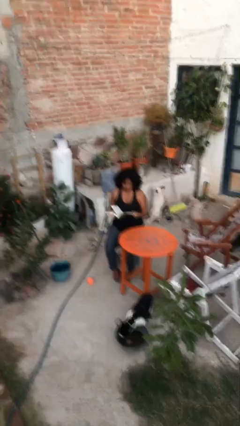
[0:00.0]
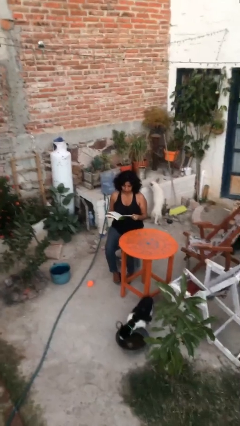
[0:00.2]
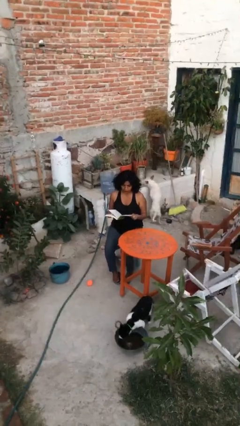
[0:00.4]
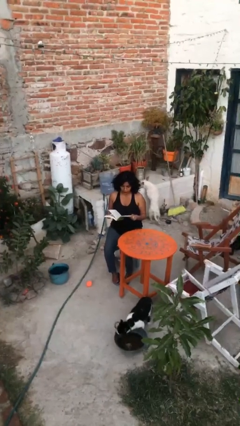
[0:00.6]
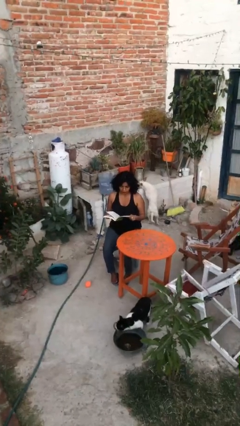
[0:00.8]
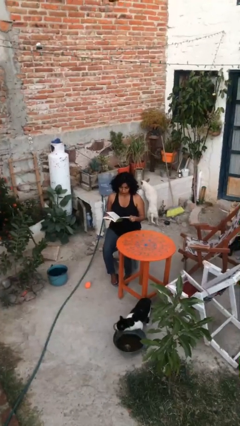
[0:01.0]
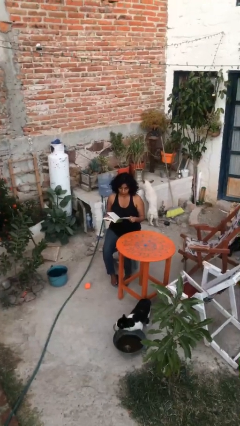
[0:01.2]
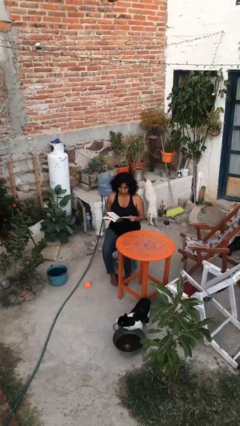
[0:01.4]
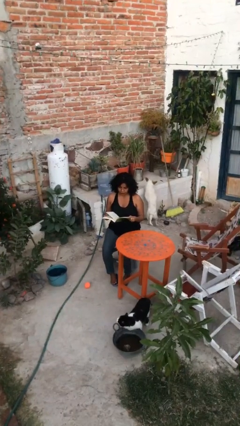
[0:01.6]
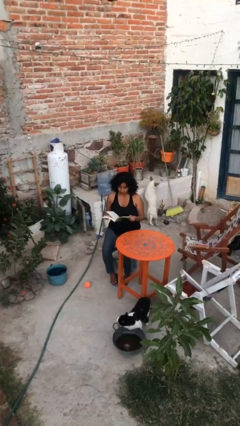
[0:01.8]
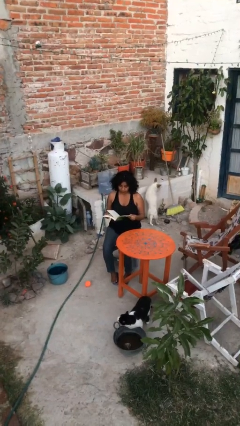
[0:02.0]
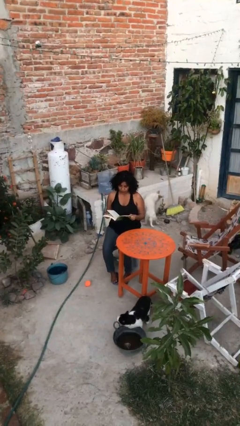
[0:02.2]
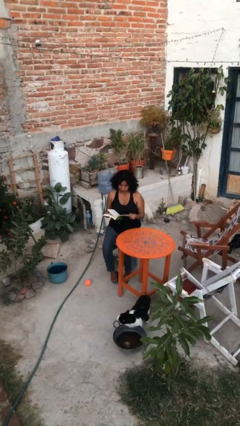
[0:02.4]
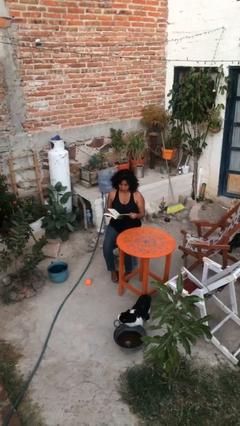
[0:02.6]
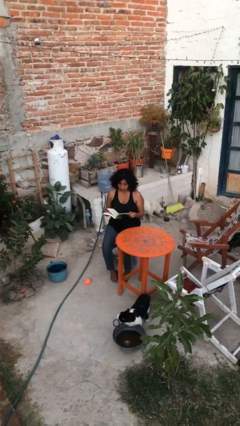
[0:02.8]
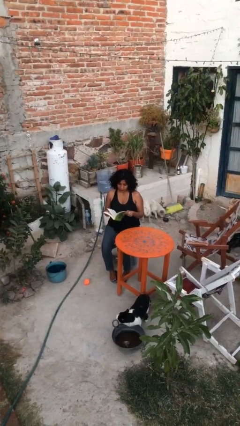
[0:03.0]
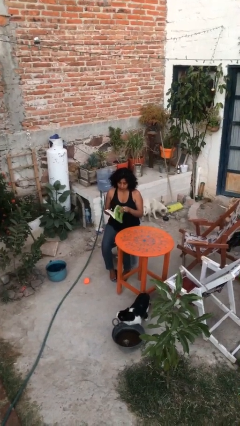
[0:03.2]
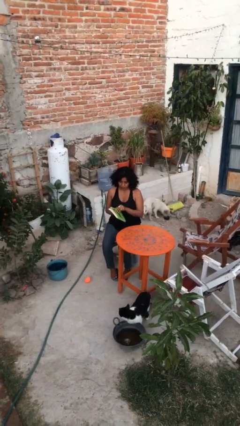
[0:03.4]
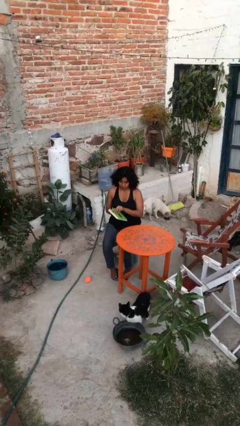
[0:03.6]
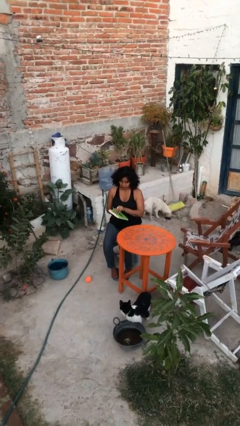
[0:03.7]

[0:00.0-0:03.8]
person reads document

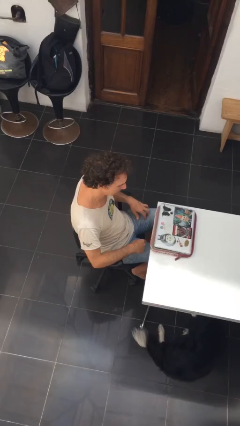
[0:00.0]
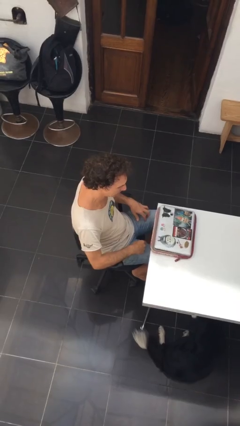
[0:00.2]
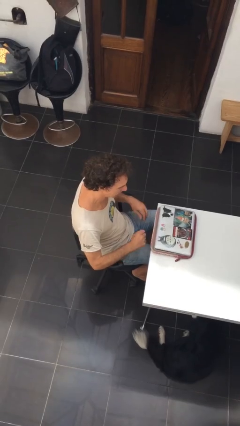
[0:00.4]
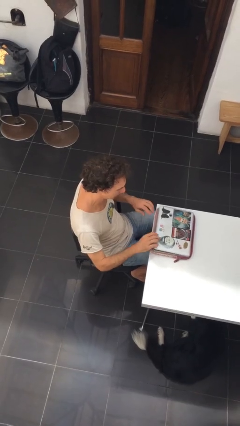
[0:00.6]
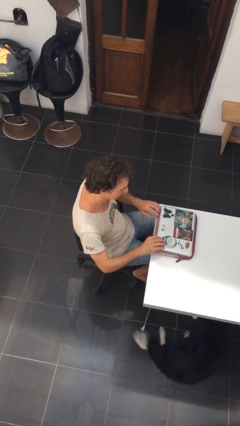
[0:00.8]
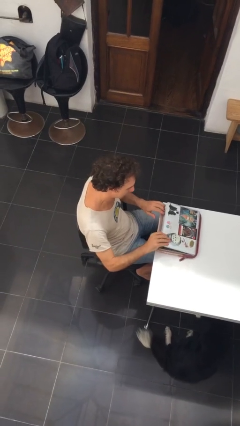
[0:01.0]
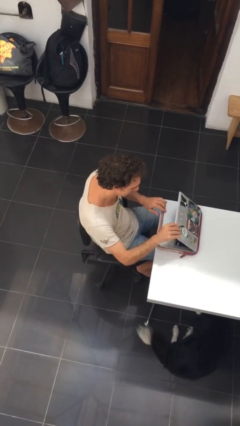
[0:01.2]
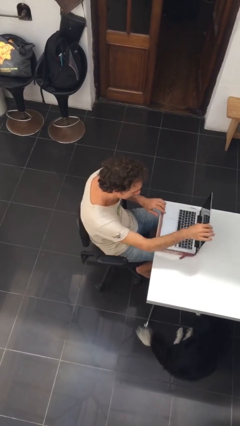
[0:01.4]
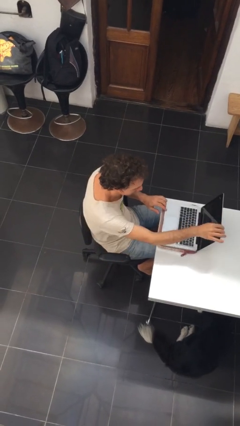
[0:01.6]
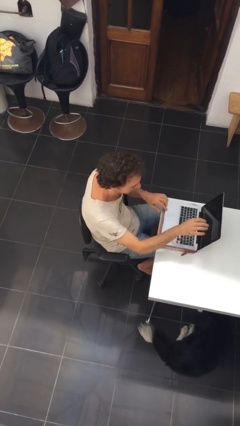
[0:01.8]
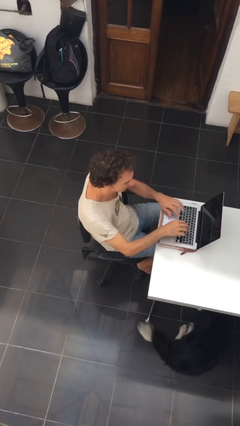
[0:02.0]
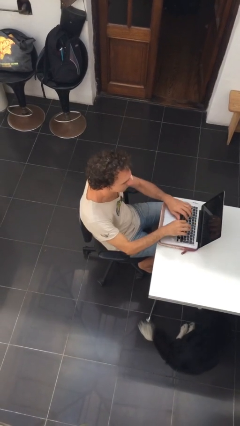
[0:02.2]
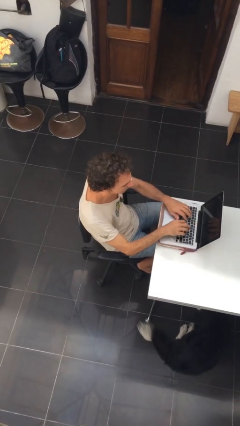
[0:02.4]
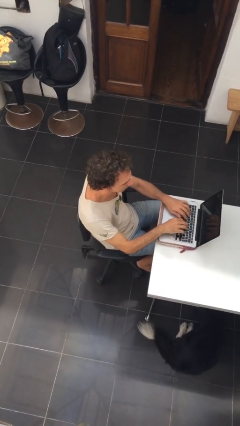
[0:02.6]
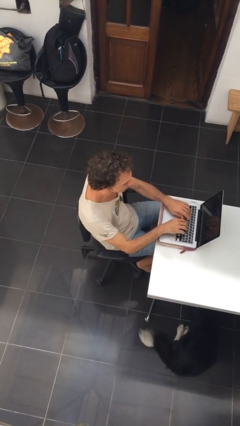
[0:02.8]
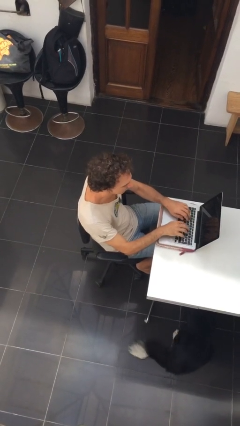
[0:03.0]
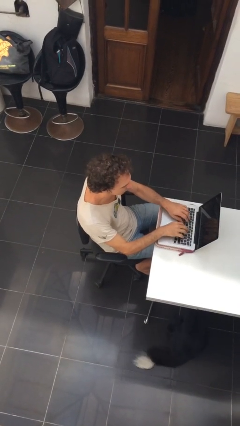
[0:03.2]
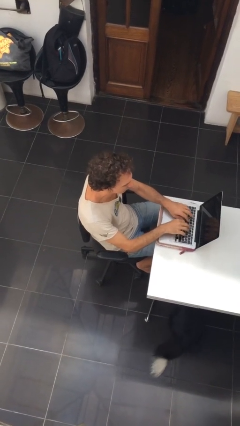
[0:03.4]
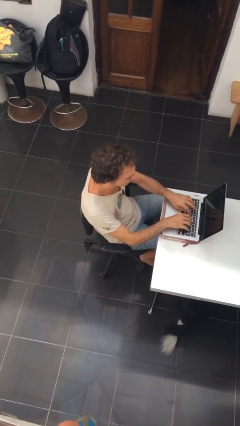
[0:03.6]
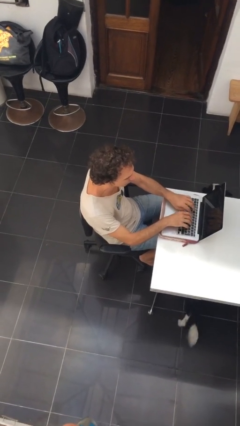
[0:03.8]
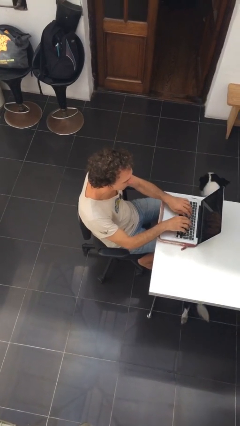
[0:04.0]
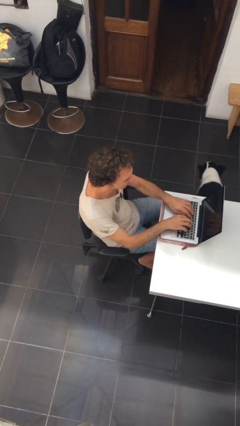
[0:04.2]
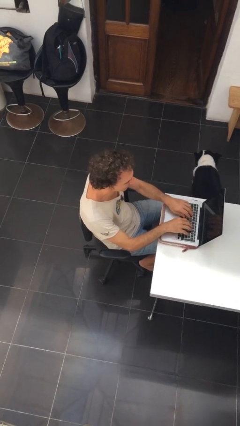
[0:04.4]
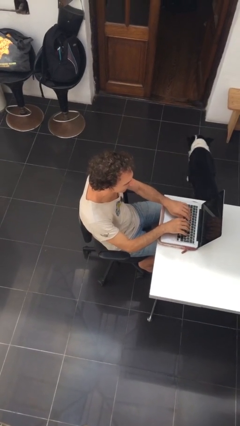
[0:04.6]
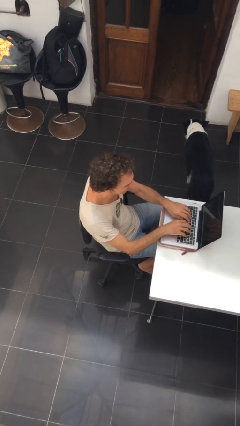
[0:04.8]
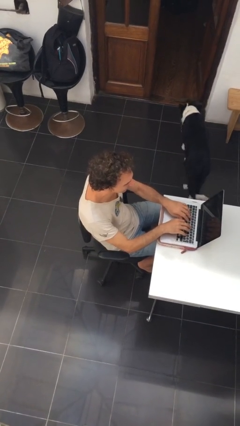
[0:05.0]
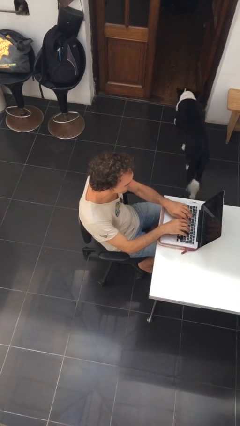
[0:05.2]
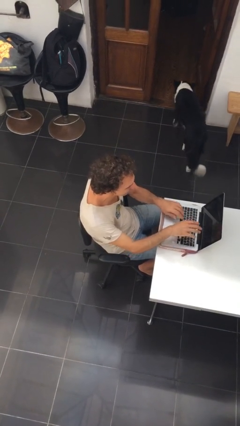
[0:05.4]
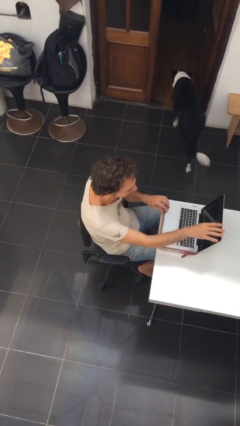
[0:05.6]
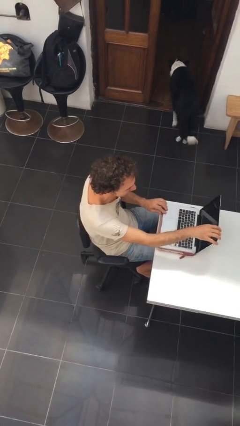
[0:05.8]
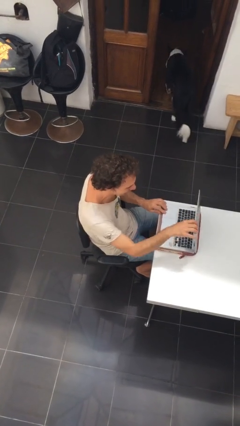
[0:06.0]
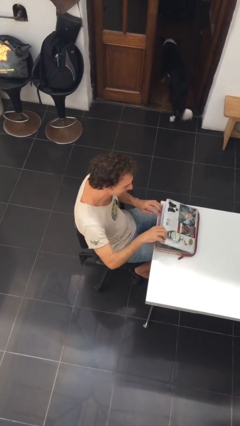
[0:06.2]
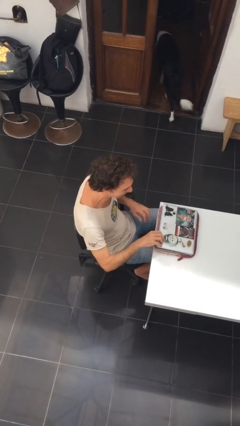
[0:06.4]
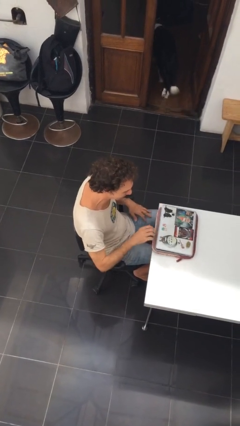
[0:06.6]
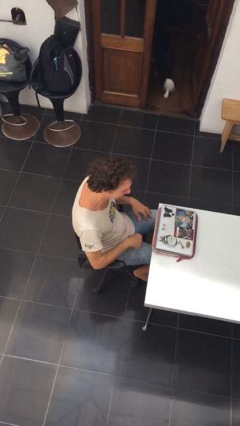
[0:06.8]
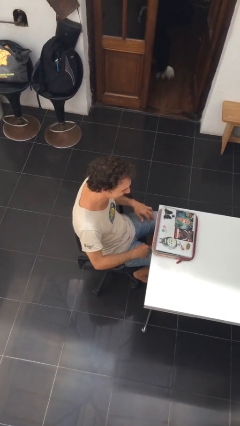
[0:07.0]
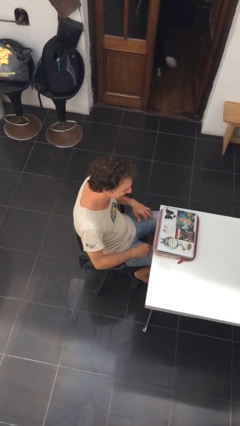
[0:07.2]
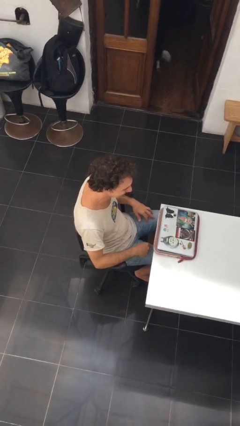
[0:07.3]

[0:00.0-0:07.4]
person interacts with laptop

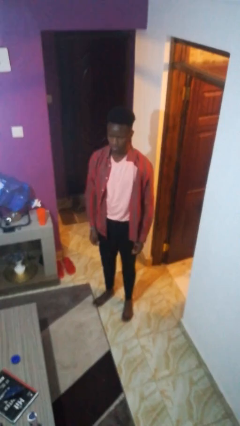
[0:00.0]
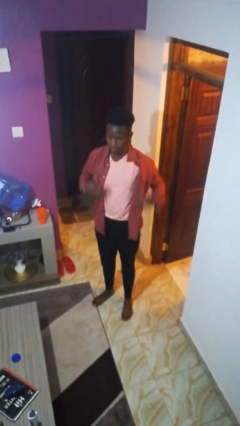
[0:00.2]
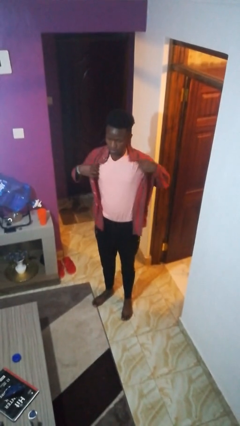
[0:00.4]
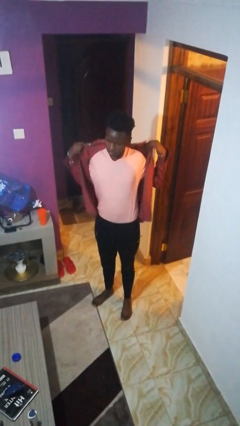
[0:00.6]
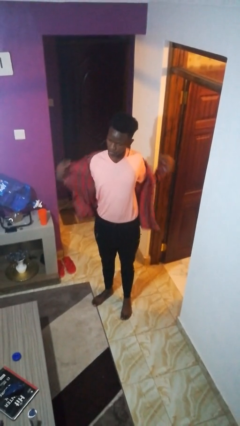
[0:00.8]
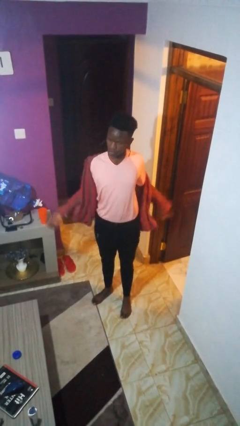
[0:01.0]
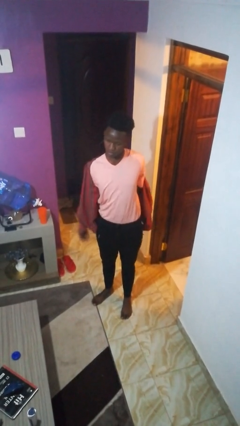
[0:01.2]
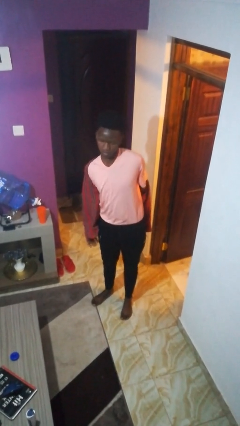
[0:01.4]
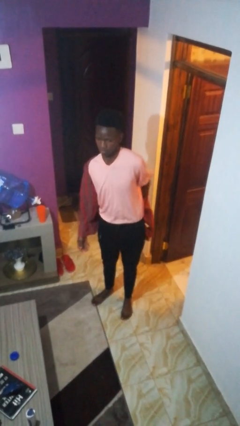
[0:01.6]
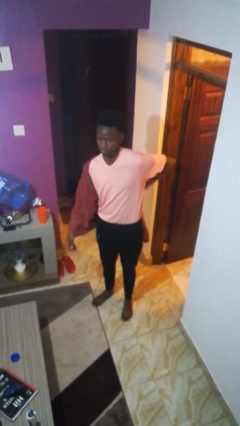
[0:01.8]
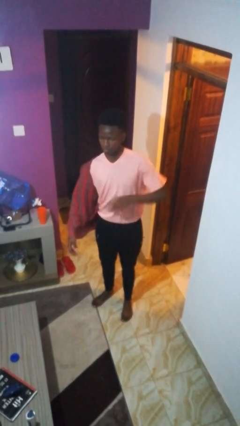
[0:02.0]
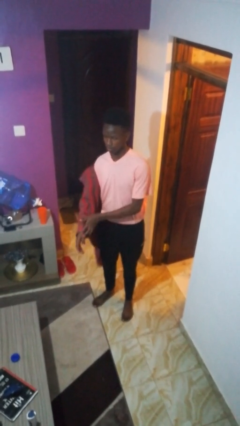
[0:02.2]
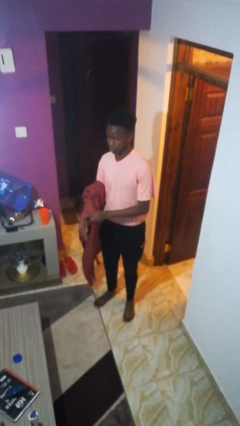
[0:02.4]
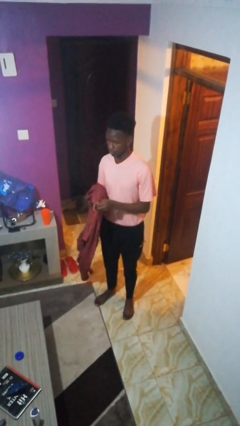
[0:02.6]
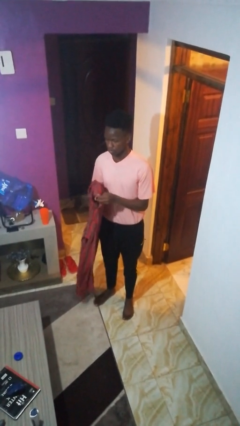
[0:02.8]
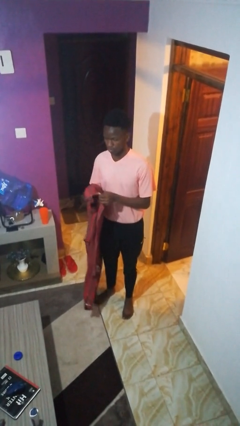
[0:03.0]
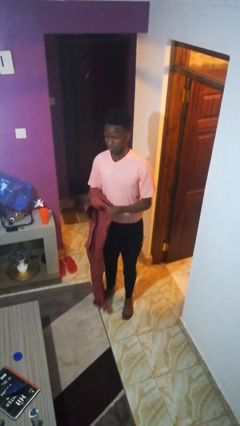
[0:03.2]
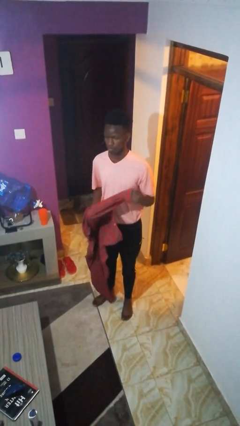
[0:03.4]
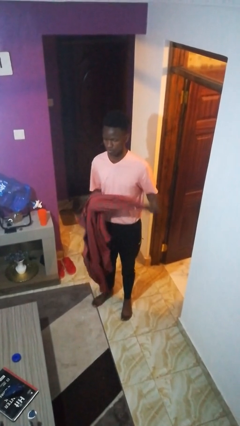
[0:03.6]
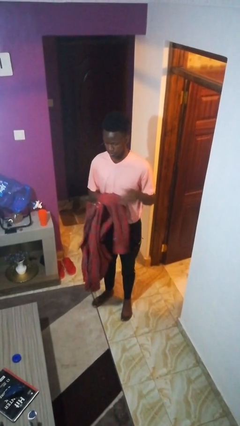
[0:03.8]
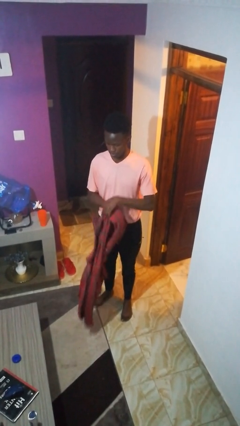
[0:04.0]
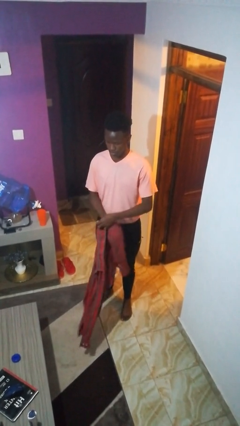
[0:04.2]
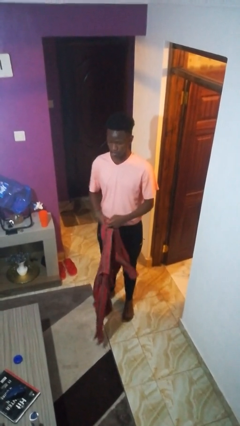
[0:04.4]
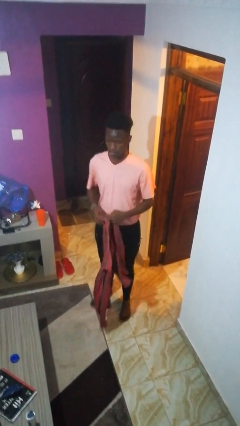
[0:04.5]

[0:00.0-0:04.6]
person takes off shirt

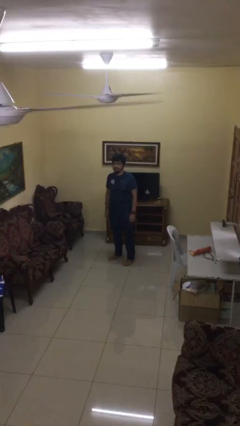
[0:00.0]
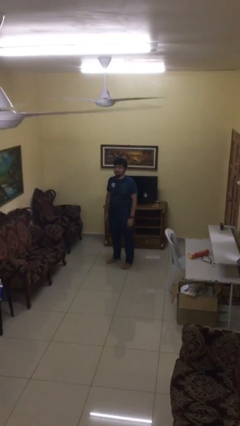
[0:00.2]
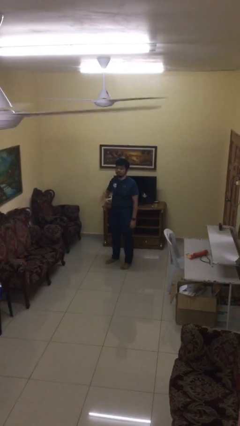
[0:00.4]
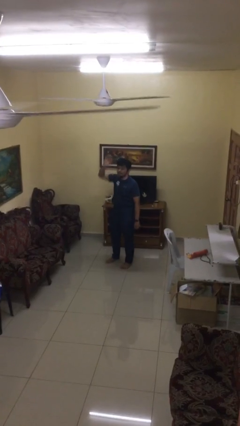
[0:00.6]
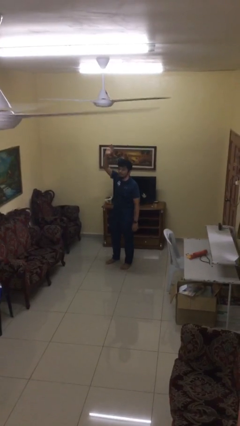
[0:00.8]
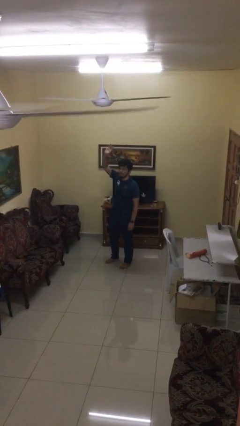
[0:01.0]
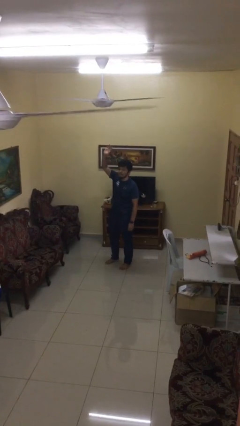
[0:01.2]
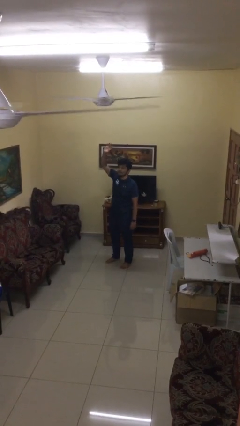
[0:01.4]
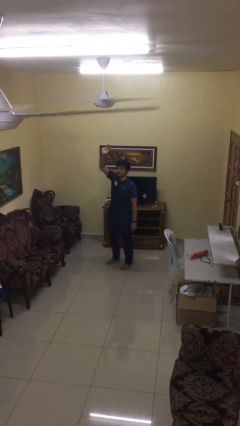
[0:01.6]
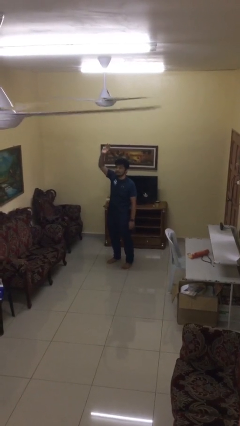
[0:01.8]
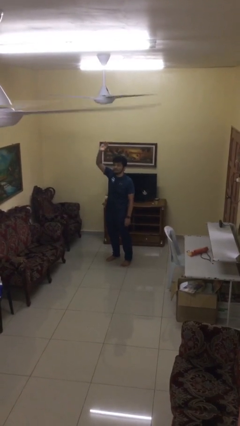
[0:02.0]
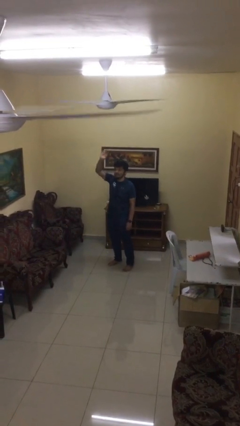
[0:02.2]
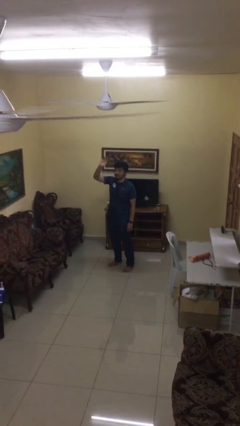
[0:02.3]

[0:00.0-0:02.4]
person gestures raise hand
